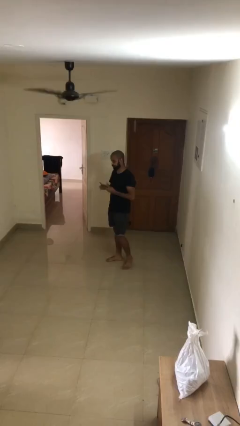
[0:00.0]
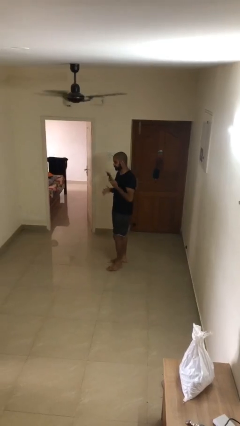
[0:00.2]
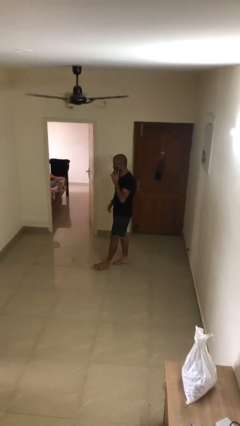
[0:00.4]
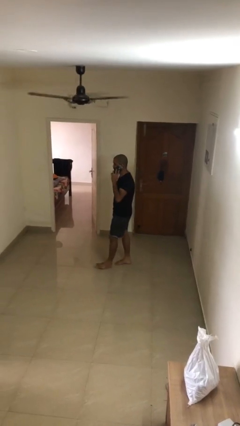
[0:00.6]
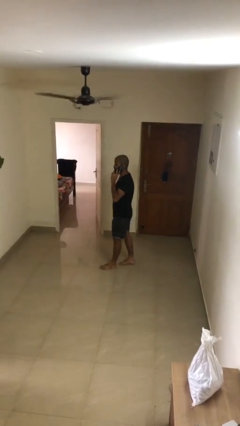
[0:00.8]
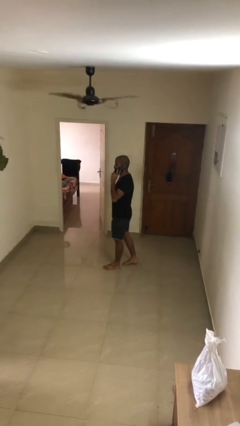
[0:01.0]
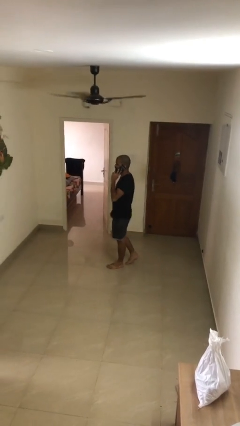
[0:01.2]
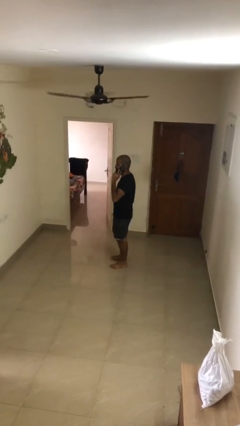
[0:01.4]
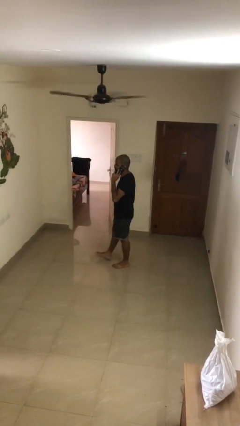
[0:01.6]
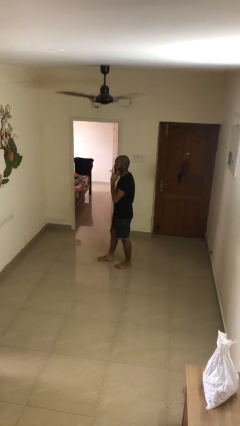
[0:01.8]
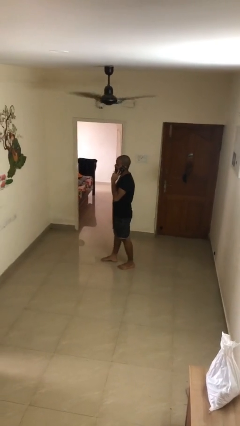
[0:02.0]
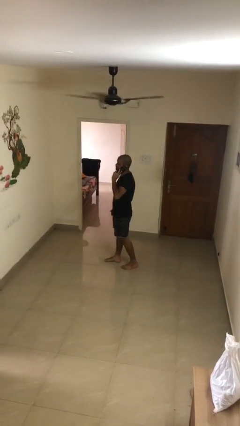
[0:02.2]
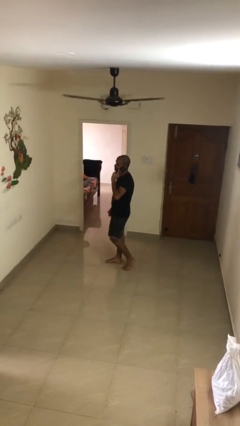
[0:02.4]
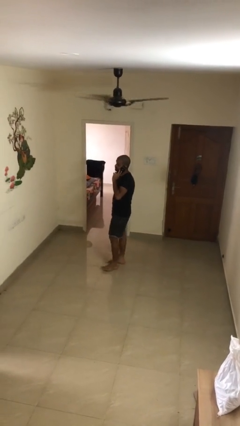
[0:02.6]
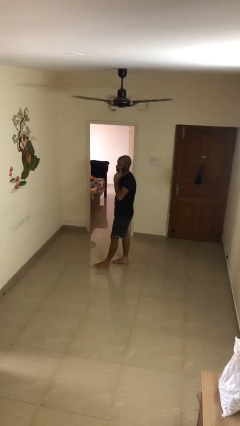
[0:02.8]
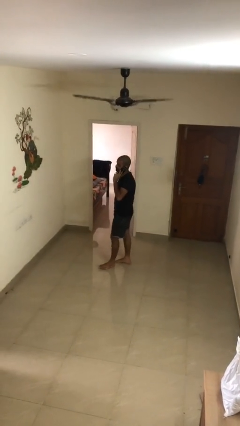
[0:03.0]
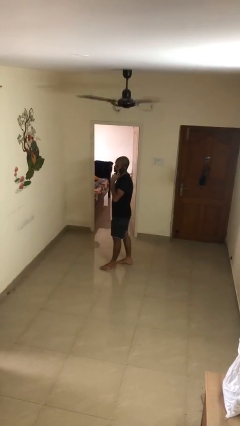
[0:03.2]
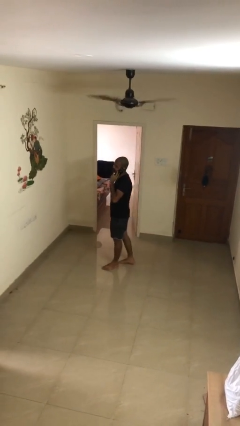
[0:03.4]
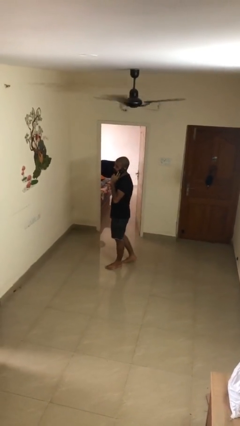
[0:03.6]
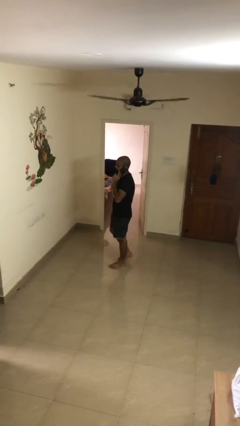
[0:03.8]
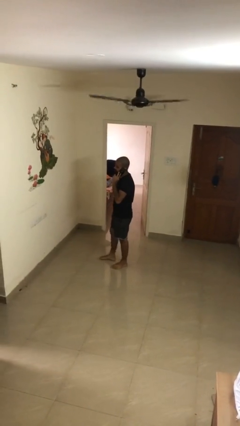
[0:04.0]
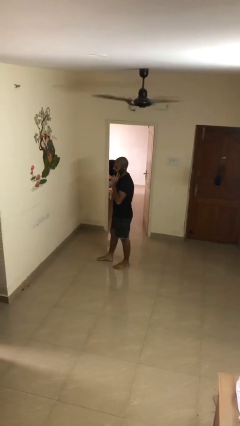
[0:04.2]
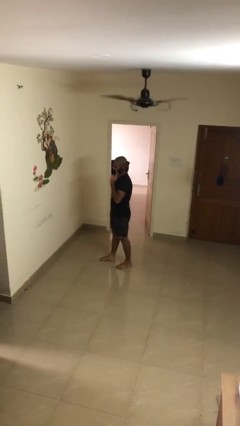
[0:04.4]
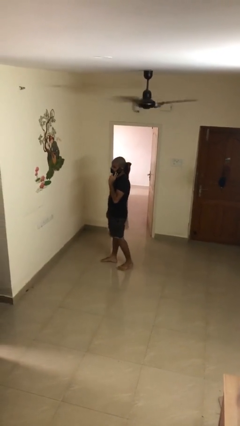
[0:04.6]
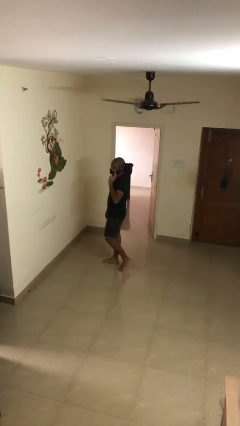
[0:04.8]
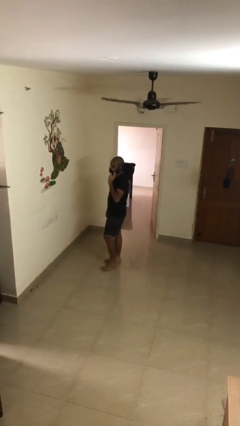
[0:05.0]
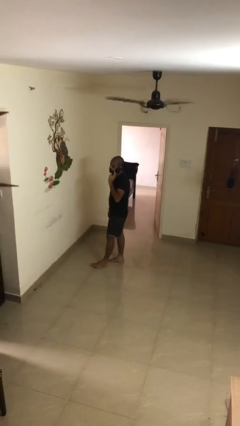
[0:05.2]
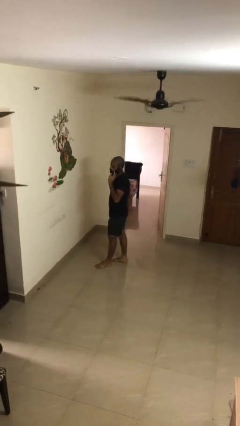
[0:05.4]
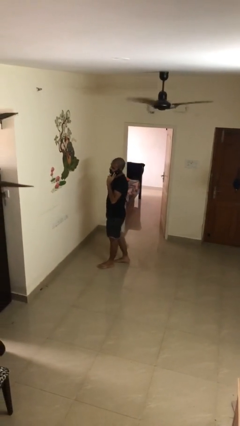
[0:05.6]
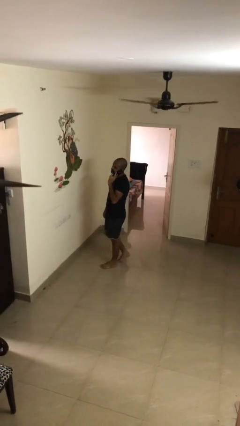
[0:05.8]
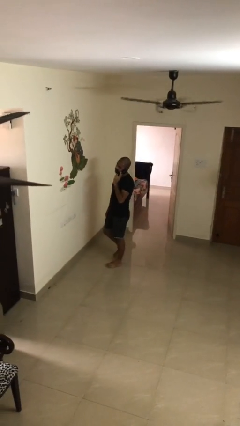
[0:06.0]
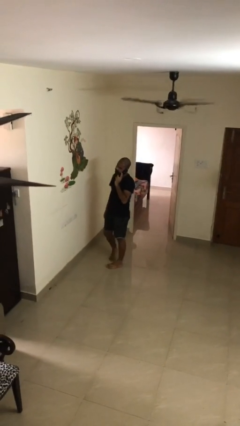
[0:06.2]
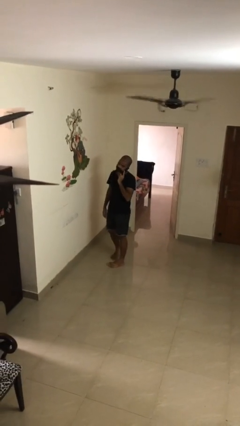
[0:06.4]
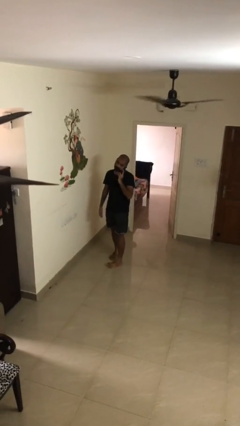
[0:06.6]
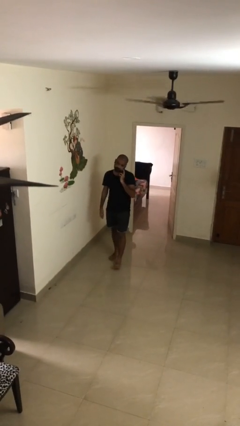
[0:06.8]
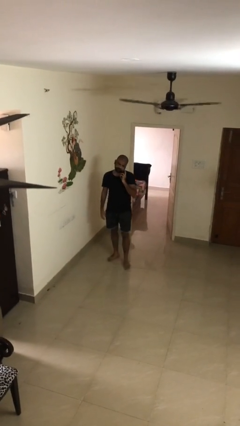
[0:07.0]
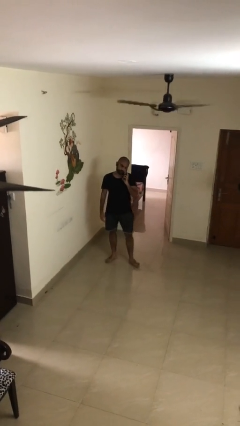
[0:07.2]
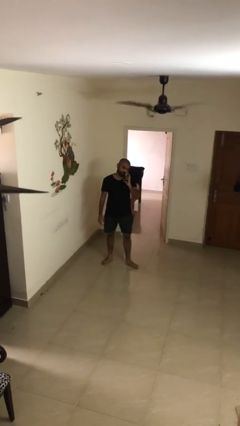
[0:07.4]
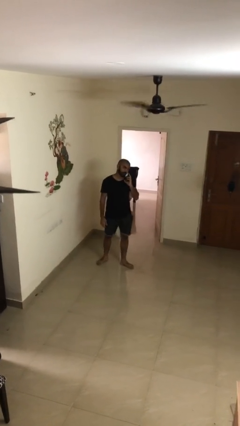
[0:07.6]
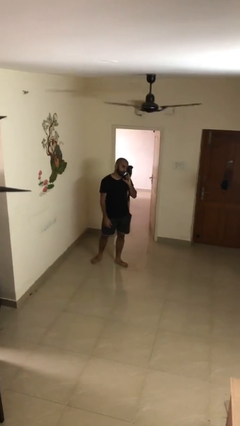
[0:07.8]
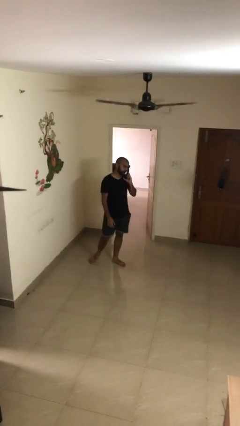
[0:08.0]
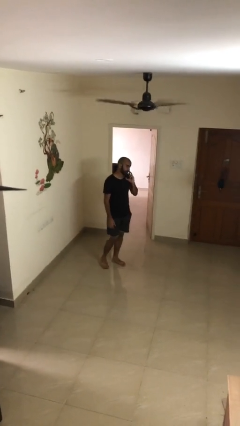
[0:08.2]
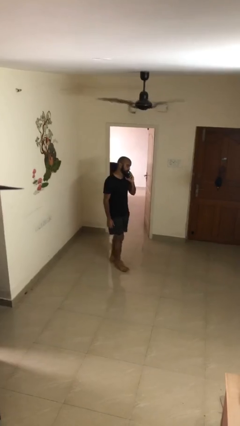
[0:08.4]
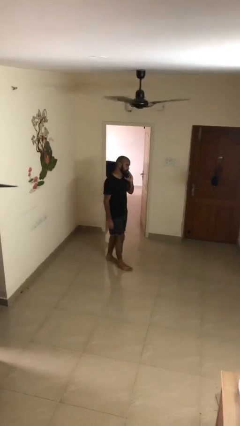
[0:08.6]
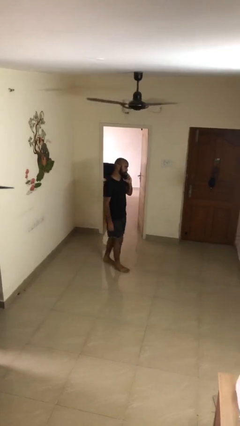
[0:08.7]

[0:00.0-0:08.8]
person talks on phone

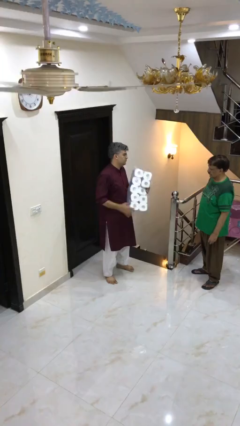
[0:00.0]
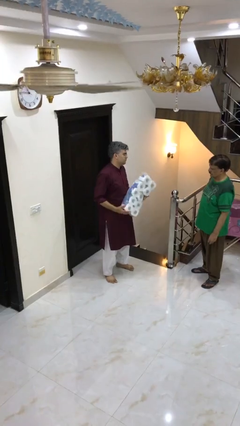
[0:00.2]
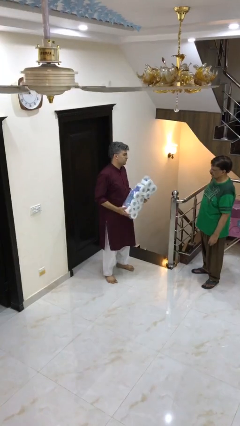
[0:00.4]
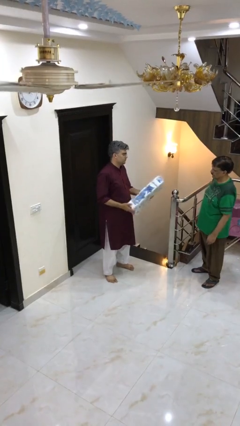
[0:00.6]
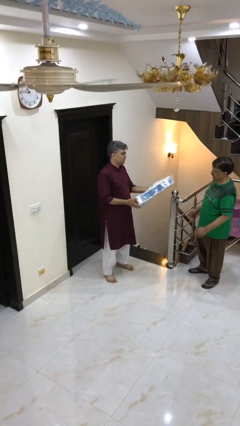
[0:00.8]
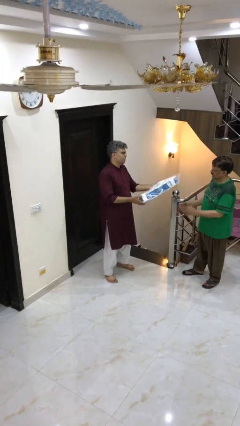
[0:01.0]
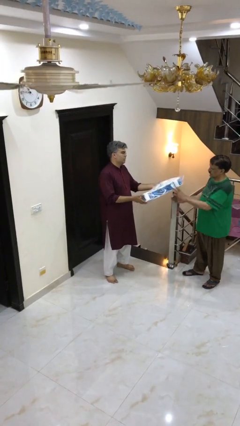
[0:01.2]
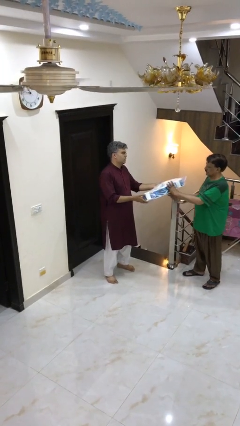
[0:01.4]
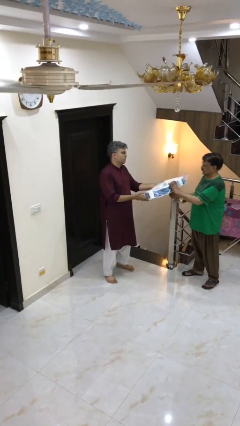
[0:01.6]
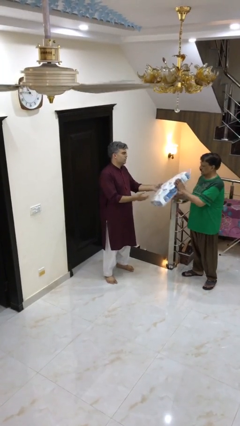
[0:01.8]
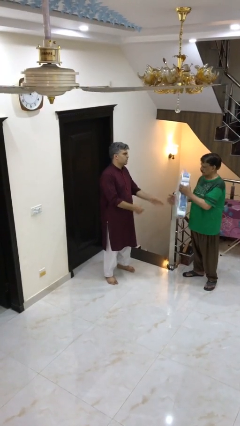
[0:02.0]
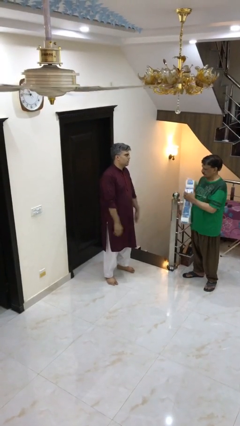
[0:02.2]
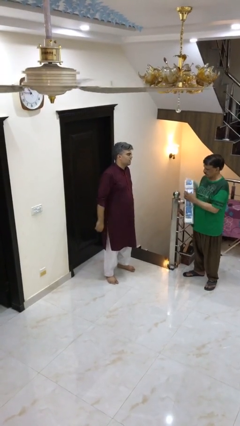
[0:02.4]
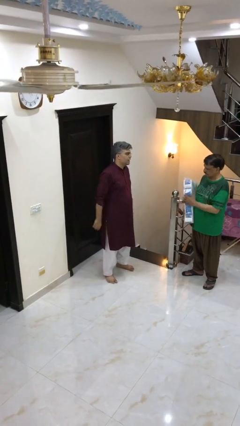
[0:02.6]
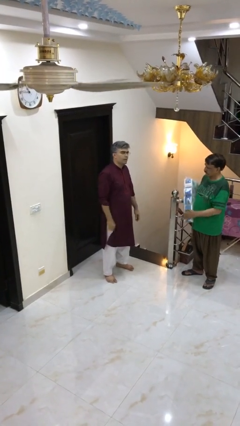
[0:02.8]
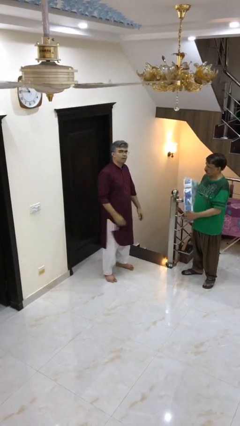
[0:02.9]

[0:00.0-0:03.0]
person transfers object to person

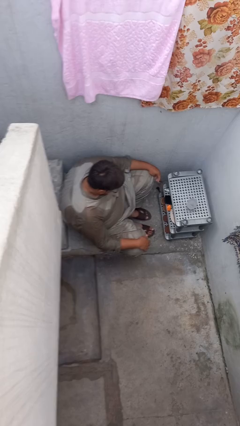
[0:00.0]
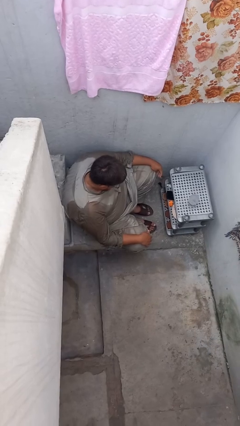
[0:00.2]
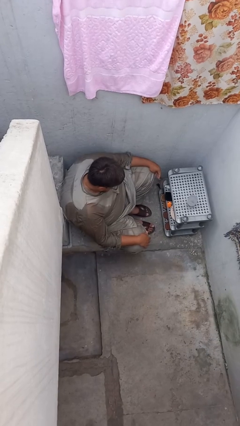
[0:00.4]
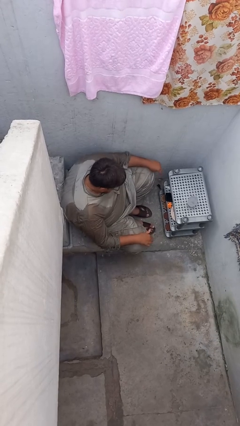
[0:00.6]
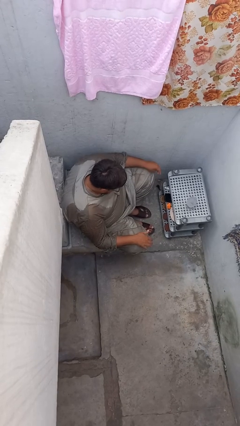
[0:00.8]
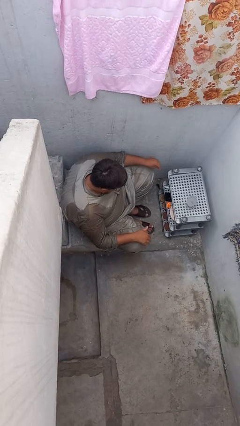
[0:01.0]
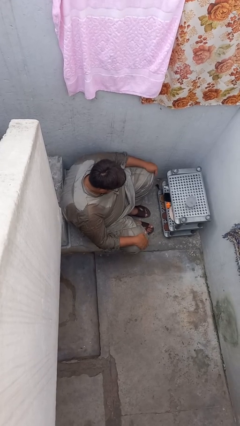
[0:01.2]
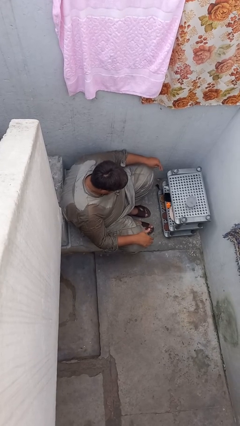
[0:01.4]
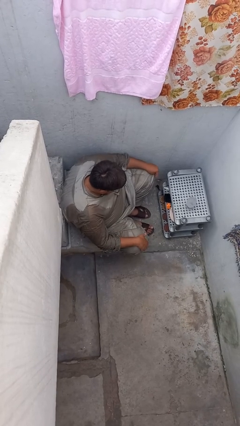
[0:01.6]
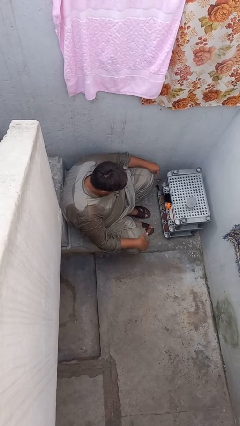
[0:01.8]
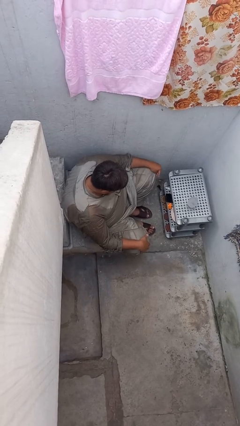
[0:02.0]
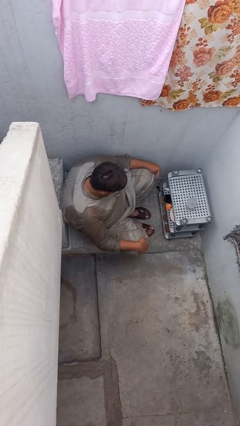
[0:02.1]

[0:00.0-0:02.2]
person slaps hands on thighs

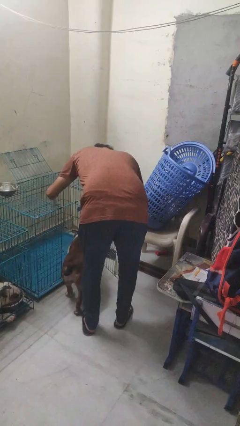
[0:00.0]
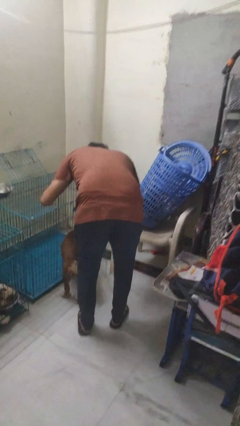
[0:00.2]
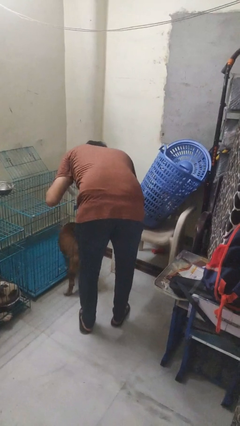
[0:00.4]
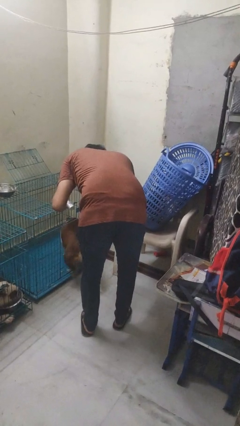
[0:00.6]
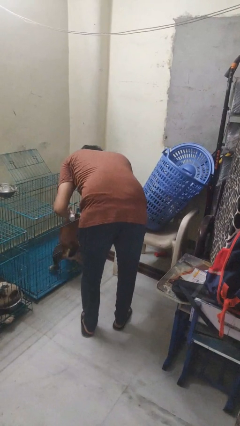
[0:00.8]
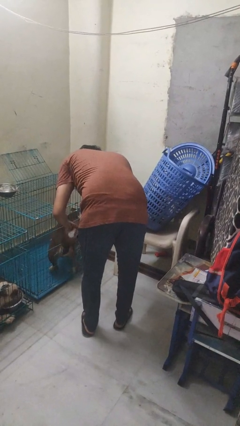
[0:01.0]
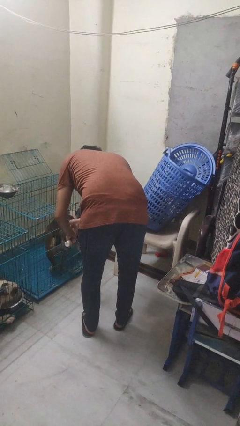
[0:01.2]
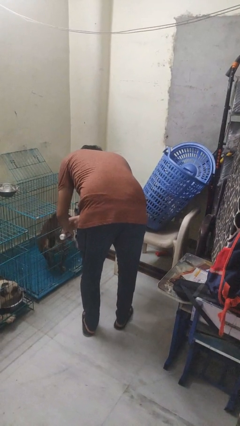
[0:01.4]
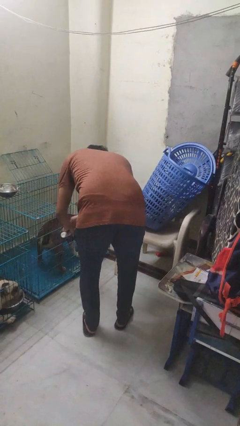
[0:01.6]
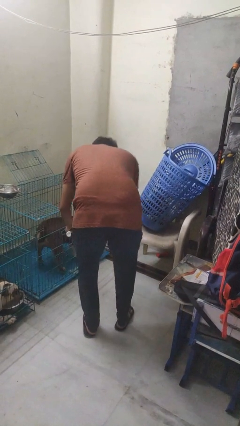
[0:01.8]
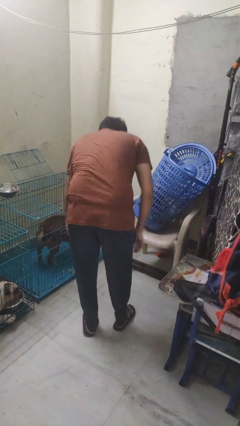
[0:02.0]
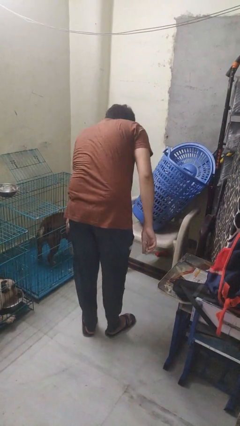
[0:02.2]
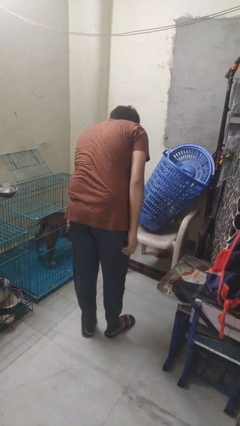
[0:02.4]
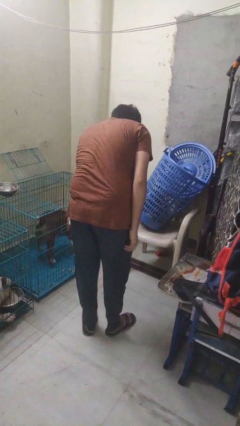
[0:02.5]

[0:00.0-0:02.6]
person crates dog

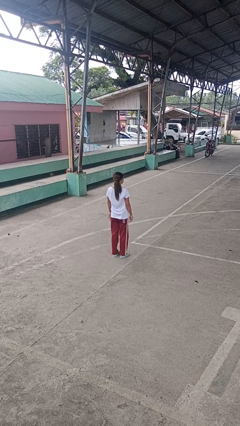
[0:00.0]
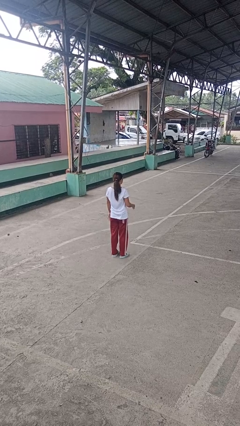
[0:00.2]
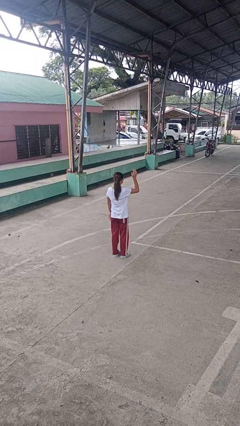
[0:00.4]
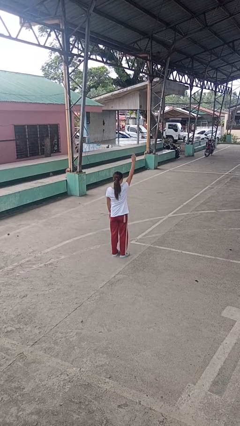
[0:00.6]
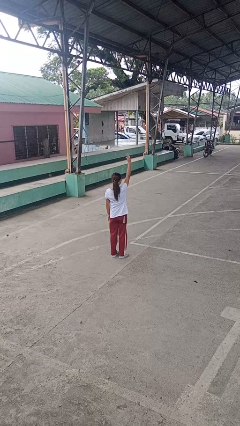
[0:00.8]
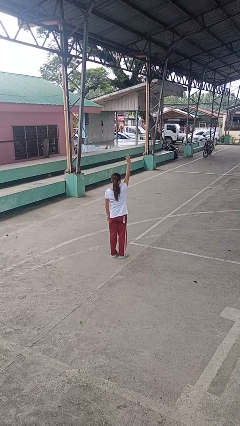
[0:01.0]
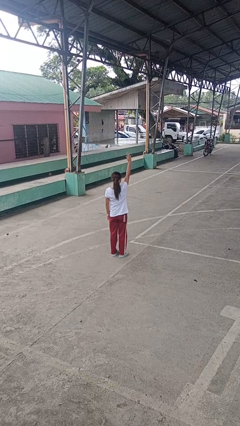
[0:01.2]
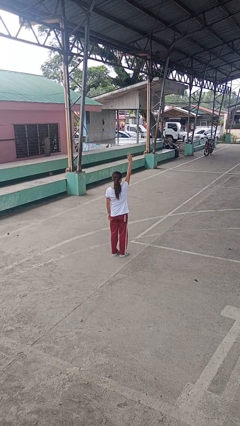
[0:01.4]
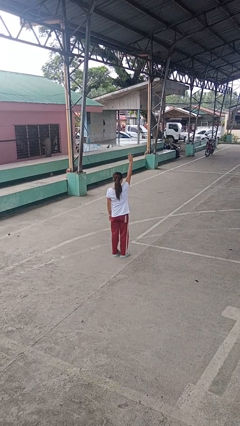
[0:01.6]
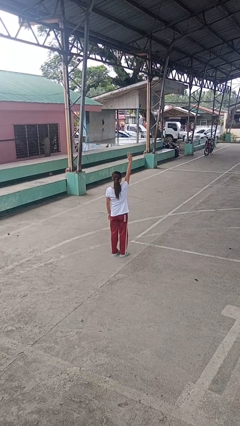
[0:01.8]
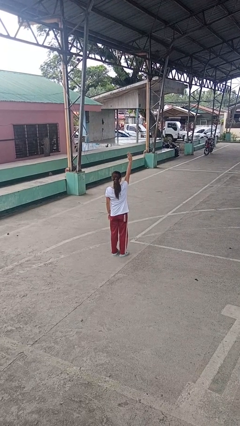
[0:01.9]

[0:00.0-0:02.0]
person gestures raise hand
